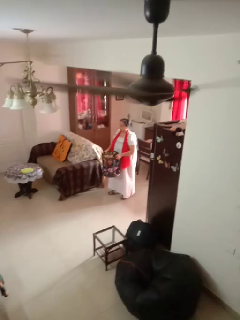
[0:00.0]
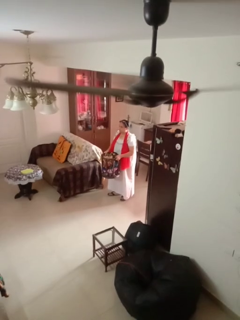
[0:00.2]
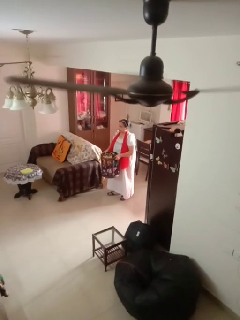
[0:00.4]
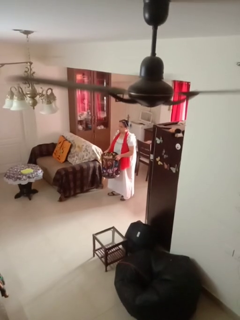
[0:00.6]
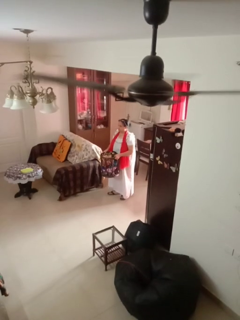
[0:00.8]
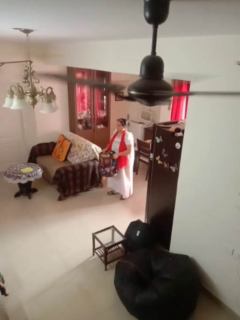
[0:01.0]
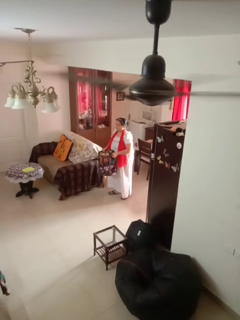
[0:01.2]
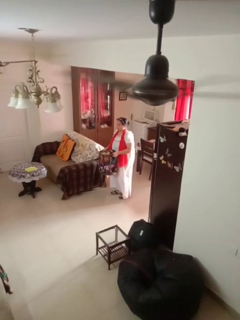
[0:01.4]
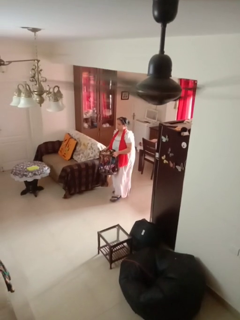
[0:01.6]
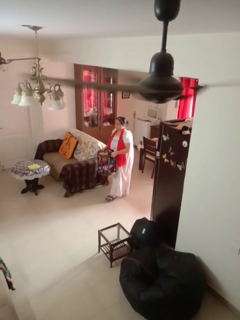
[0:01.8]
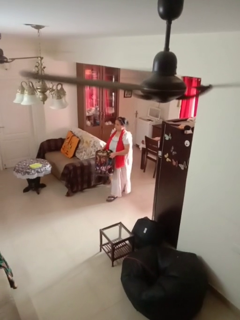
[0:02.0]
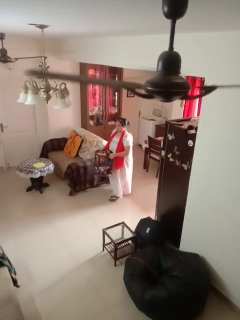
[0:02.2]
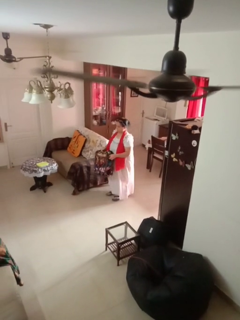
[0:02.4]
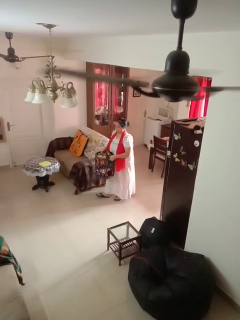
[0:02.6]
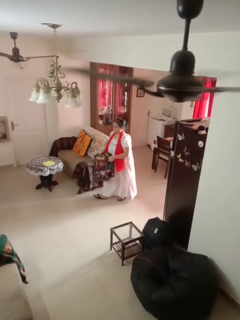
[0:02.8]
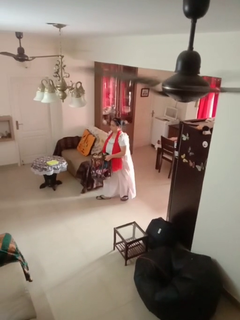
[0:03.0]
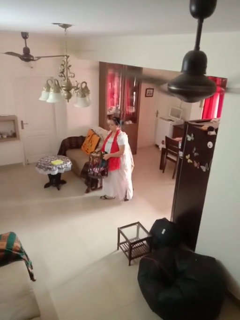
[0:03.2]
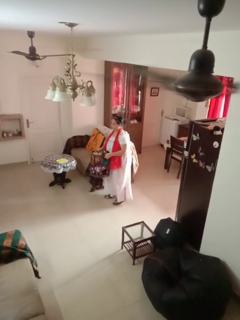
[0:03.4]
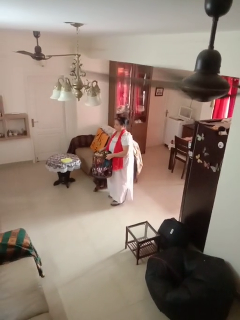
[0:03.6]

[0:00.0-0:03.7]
person carries laundry basket

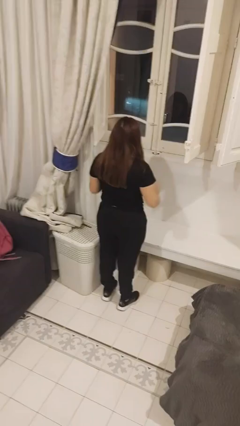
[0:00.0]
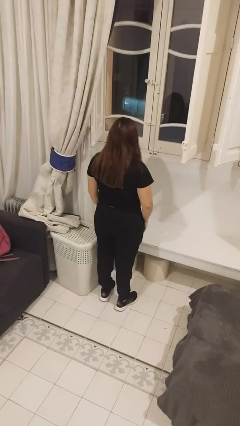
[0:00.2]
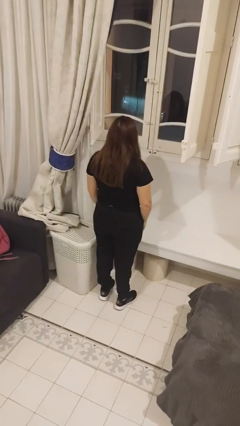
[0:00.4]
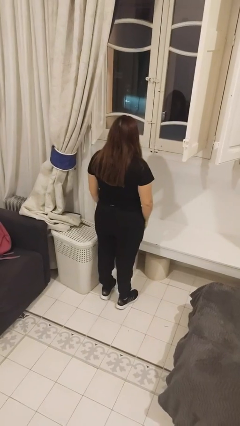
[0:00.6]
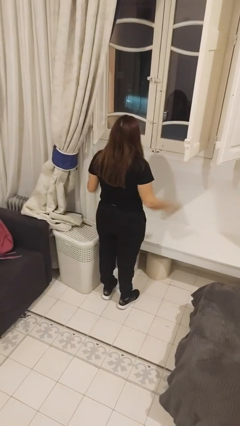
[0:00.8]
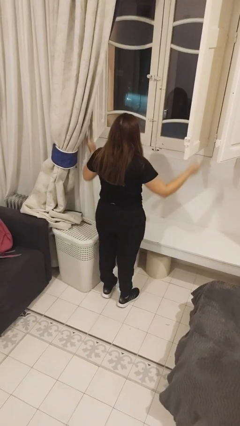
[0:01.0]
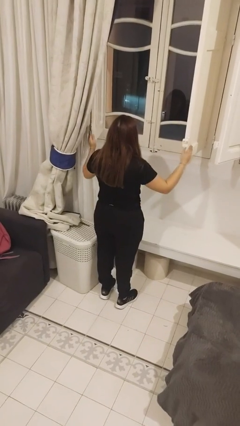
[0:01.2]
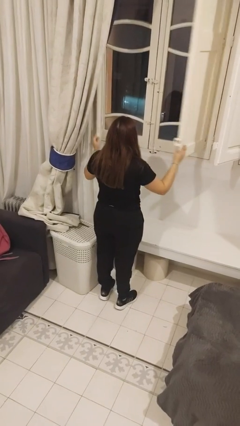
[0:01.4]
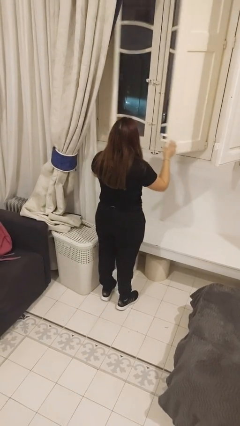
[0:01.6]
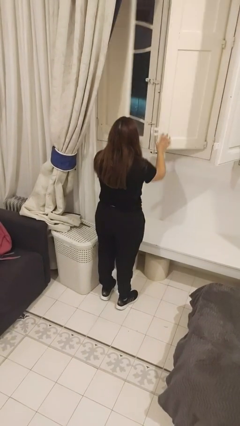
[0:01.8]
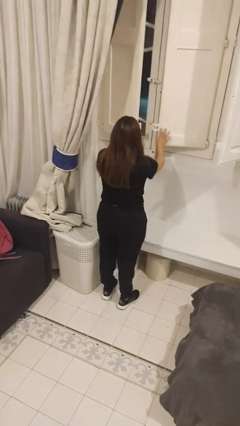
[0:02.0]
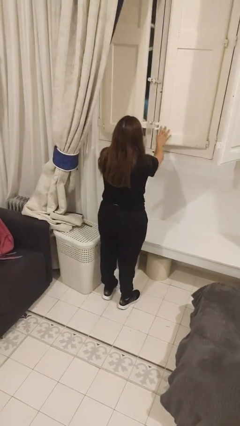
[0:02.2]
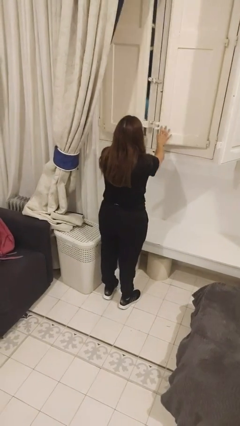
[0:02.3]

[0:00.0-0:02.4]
person closes home window

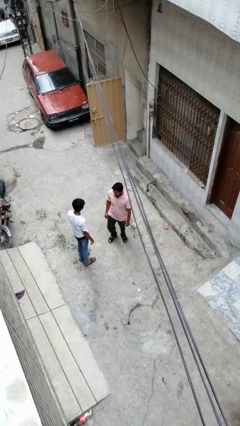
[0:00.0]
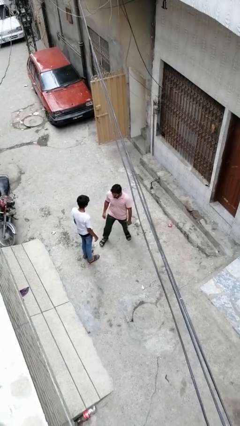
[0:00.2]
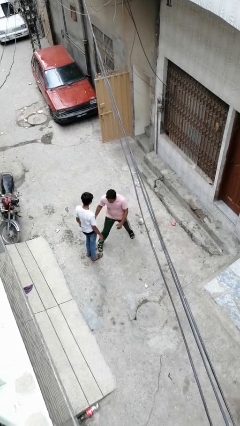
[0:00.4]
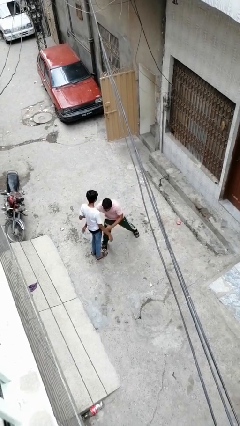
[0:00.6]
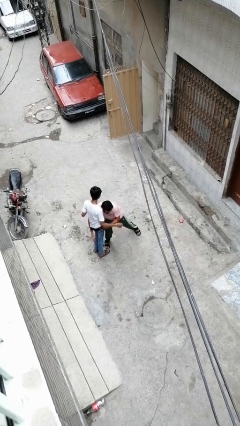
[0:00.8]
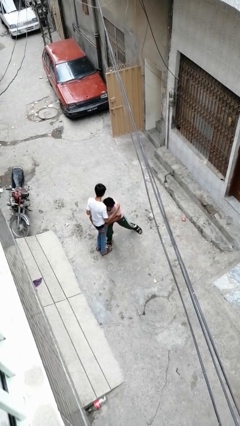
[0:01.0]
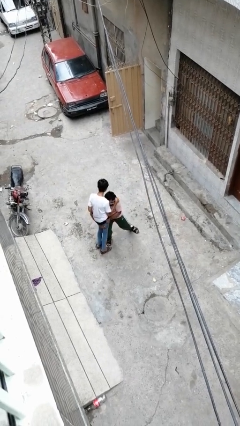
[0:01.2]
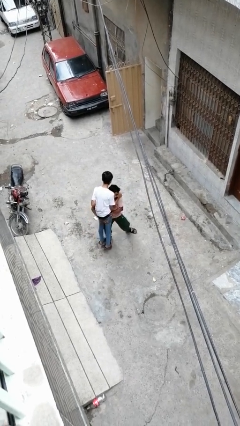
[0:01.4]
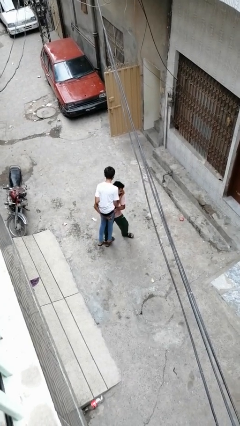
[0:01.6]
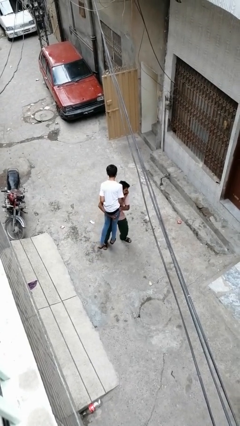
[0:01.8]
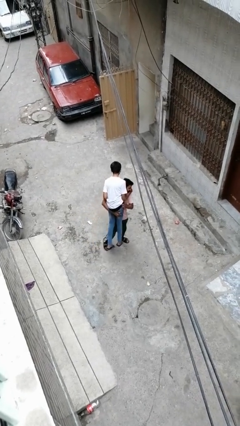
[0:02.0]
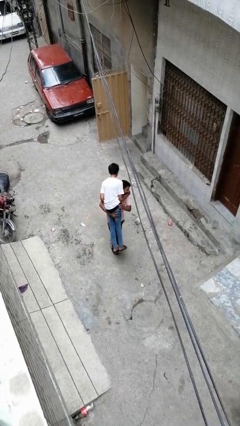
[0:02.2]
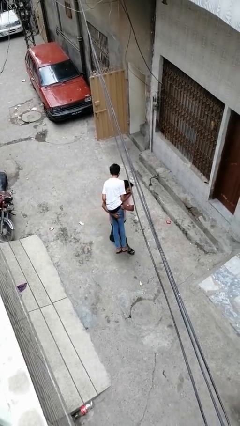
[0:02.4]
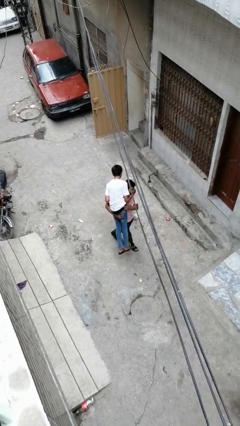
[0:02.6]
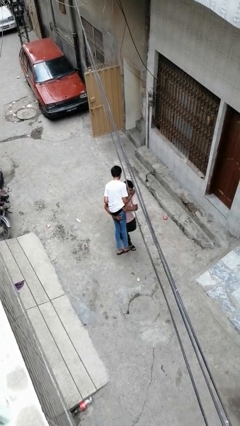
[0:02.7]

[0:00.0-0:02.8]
person picks up person

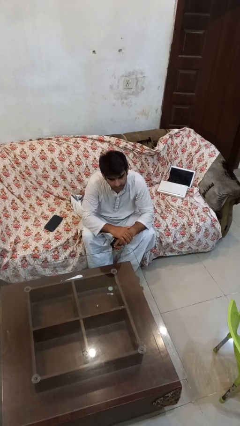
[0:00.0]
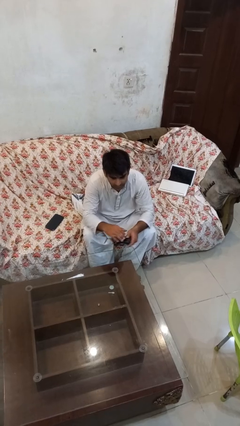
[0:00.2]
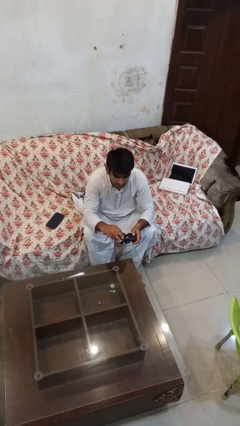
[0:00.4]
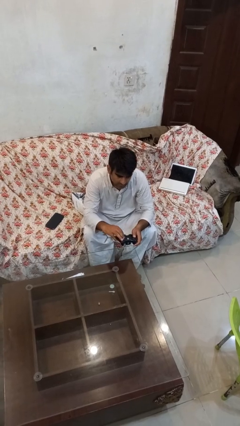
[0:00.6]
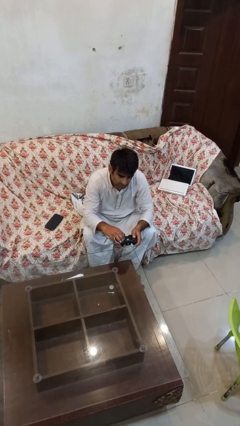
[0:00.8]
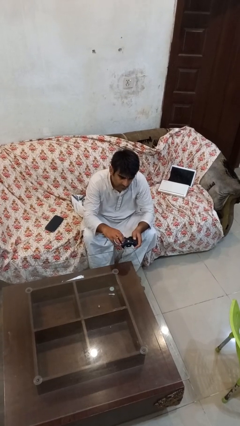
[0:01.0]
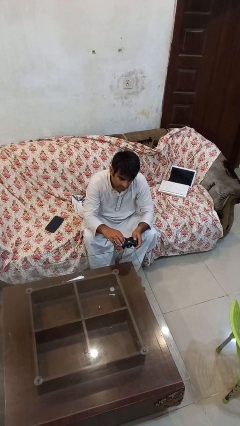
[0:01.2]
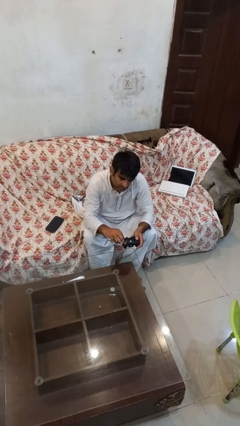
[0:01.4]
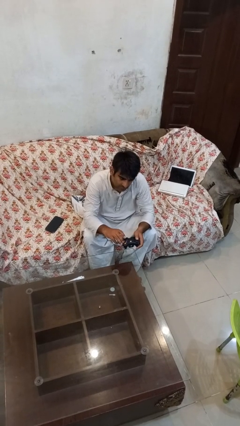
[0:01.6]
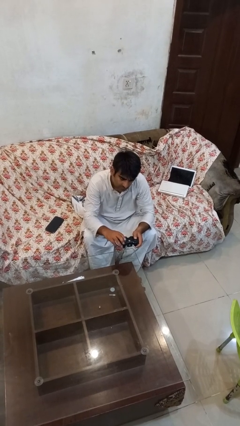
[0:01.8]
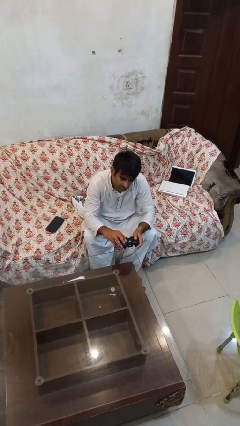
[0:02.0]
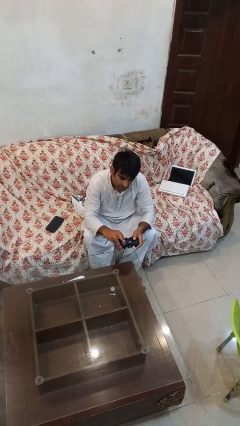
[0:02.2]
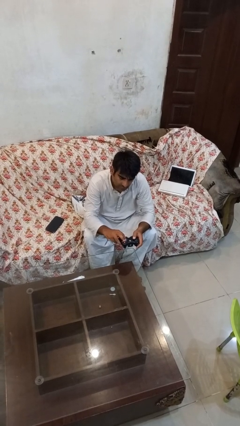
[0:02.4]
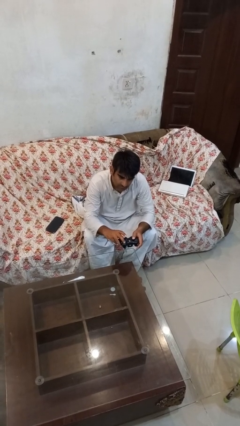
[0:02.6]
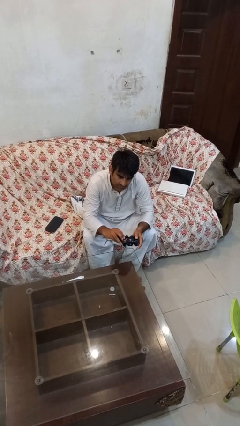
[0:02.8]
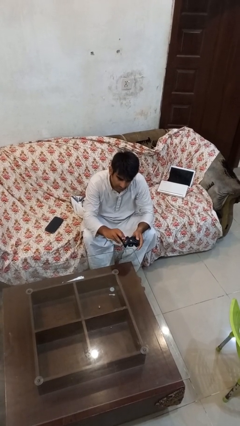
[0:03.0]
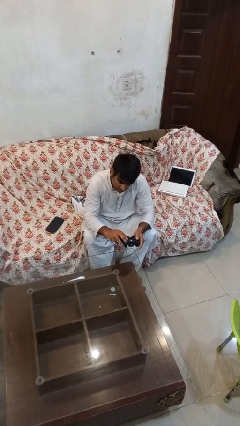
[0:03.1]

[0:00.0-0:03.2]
person interacts with handheld game

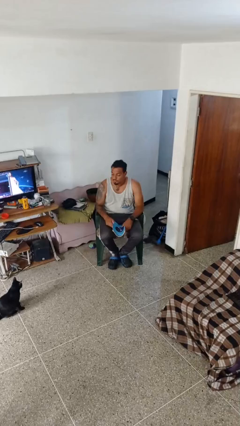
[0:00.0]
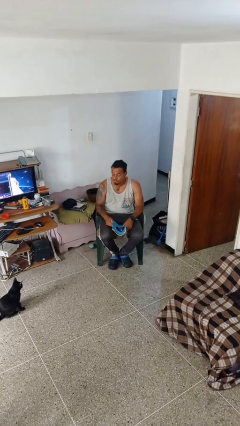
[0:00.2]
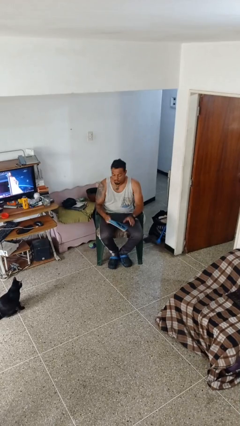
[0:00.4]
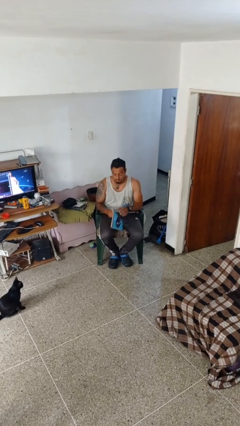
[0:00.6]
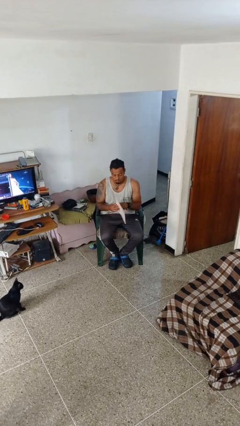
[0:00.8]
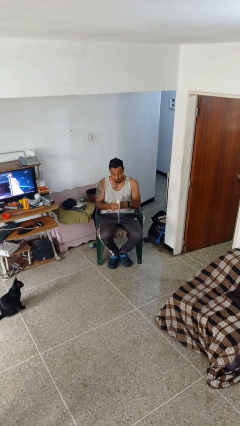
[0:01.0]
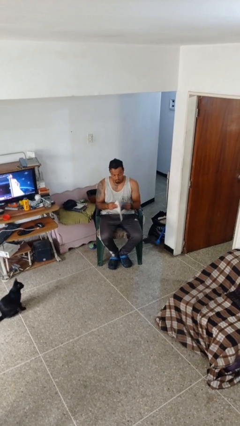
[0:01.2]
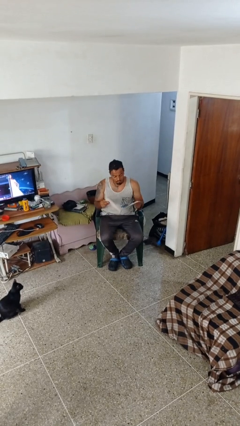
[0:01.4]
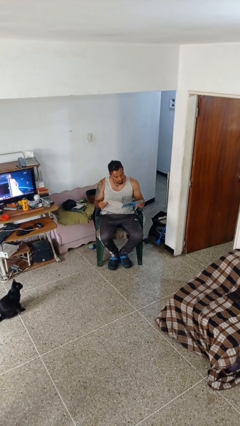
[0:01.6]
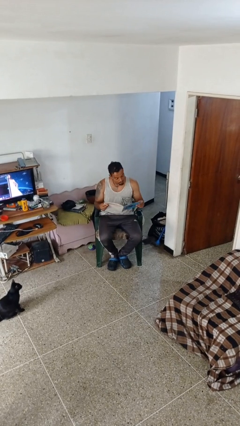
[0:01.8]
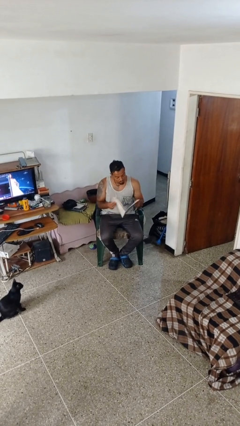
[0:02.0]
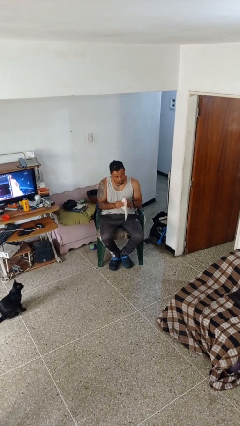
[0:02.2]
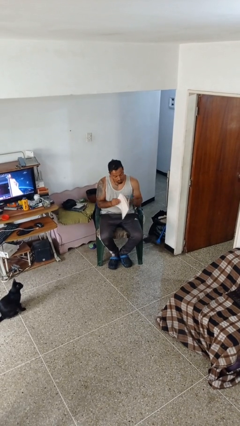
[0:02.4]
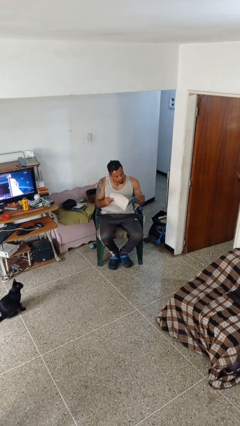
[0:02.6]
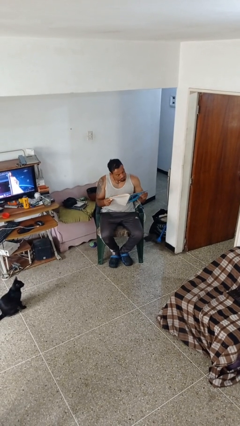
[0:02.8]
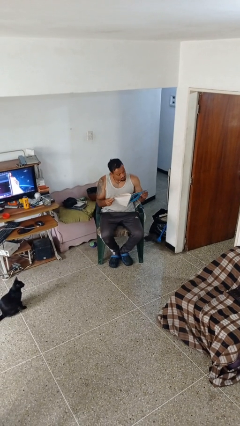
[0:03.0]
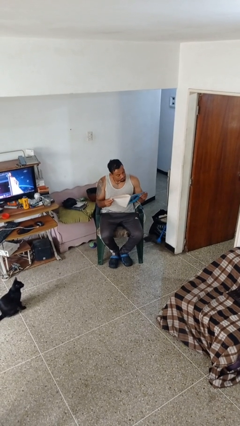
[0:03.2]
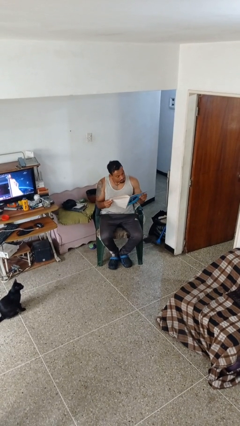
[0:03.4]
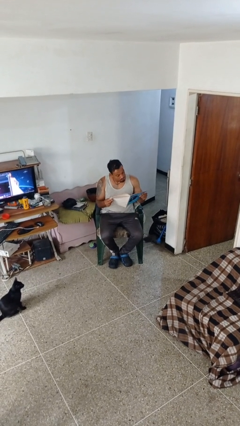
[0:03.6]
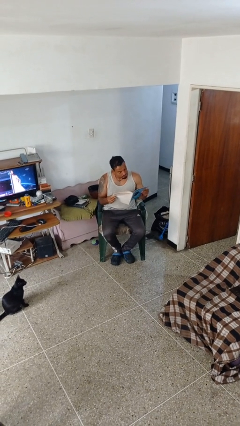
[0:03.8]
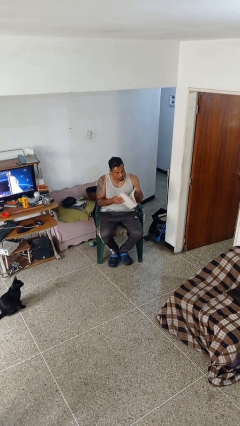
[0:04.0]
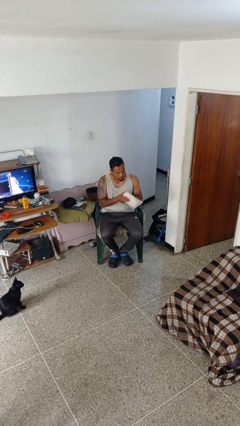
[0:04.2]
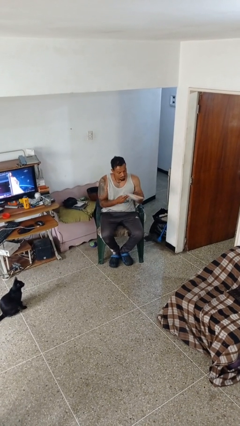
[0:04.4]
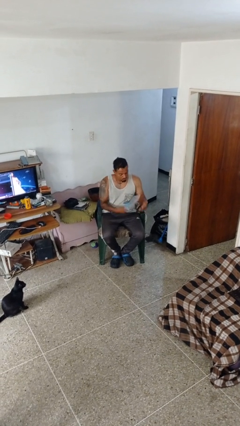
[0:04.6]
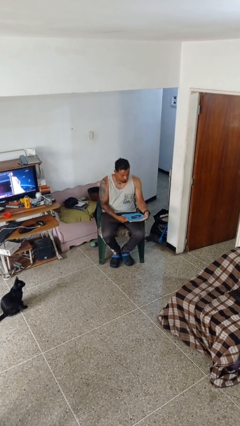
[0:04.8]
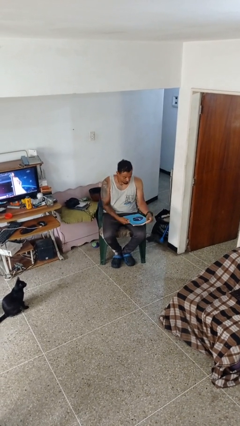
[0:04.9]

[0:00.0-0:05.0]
person reads magazine

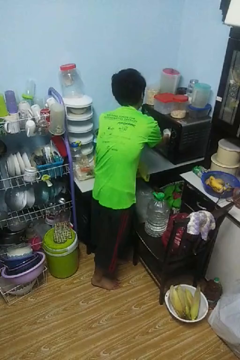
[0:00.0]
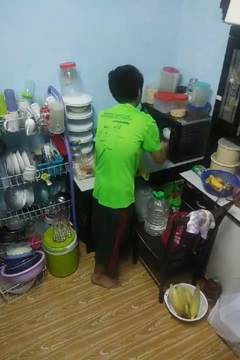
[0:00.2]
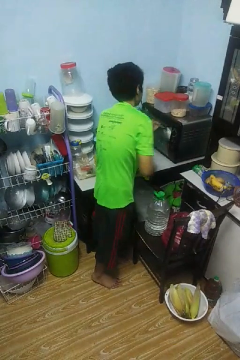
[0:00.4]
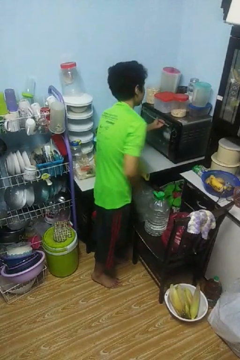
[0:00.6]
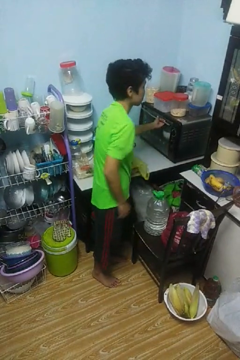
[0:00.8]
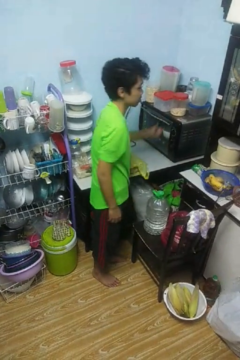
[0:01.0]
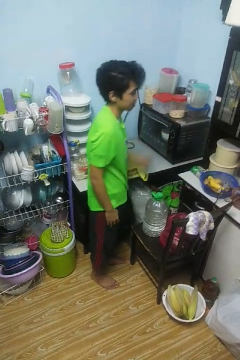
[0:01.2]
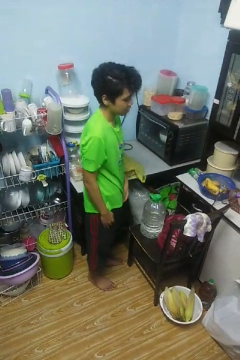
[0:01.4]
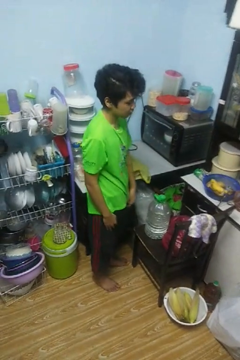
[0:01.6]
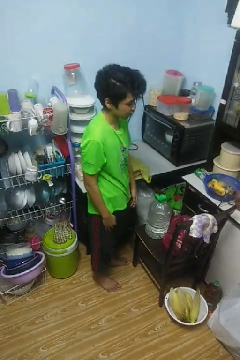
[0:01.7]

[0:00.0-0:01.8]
person closes microwave

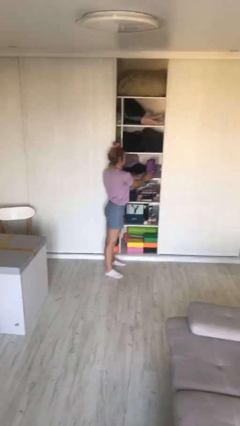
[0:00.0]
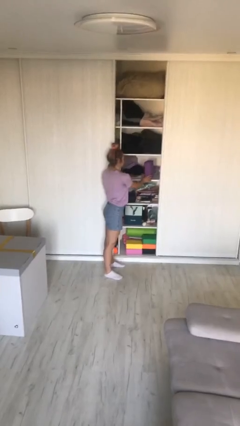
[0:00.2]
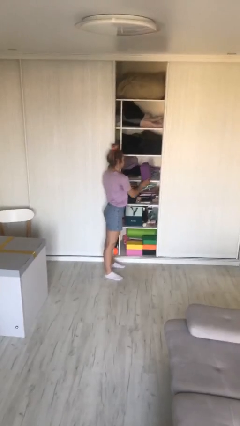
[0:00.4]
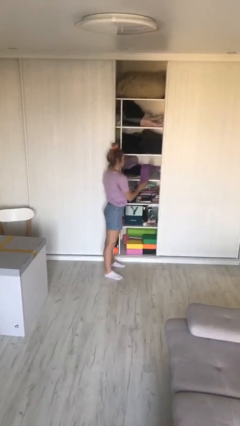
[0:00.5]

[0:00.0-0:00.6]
person picks up object from cabinet
